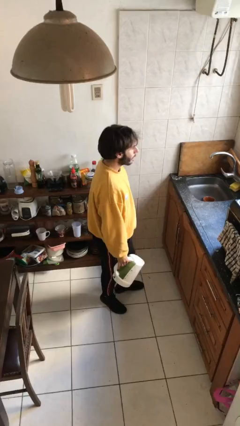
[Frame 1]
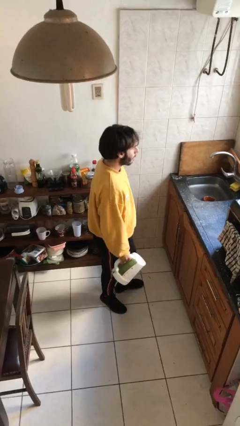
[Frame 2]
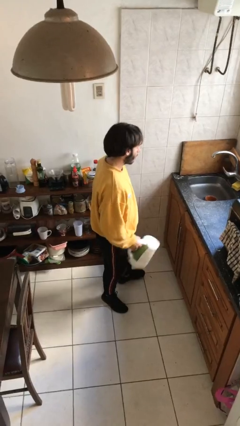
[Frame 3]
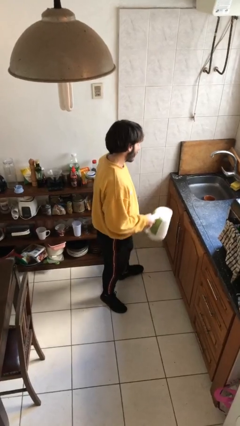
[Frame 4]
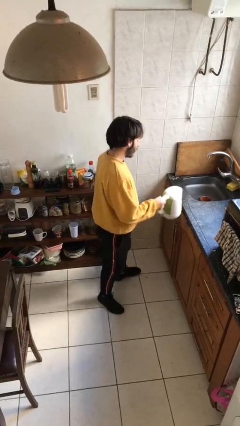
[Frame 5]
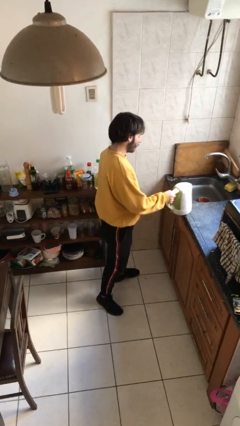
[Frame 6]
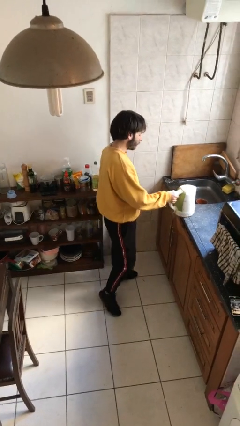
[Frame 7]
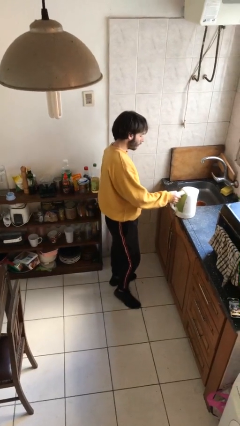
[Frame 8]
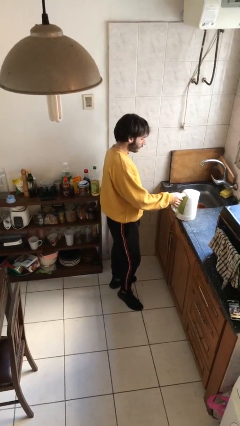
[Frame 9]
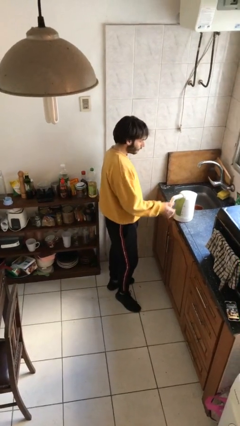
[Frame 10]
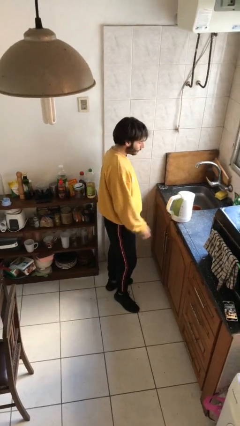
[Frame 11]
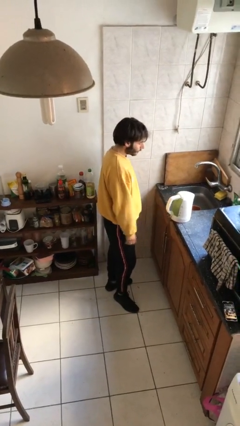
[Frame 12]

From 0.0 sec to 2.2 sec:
person puts down object on countertop

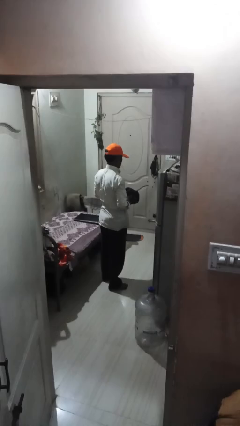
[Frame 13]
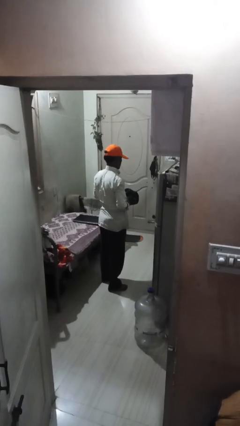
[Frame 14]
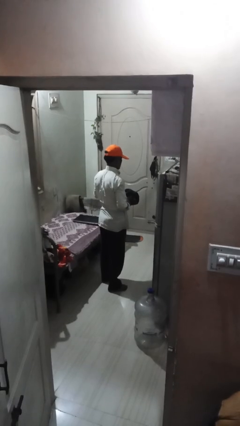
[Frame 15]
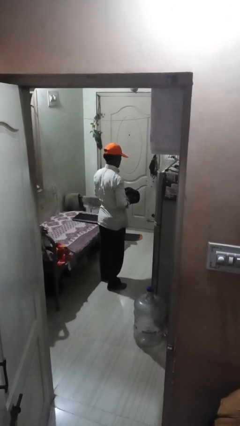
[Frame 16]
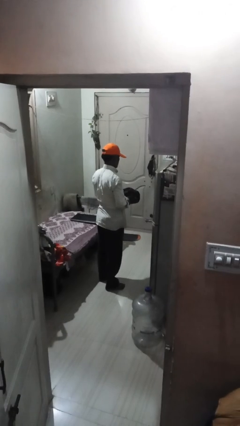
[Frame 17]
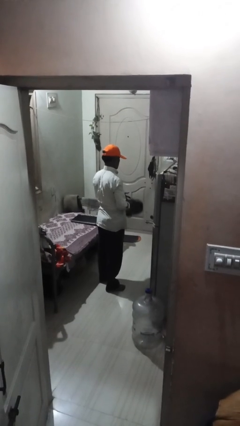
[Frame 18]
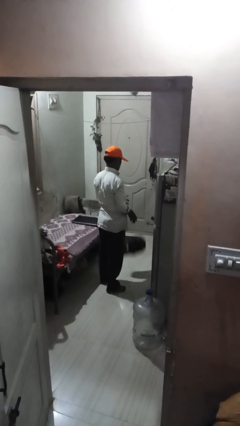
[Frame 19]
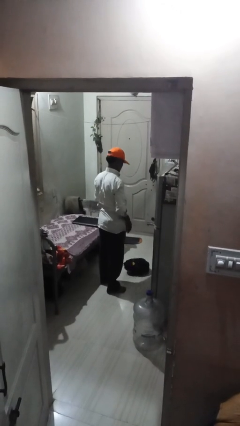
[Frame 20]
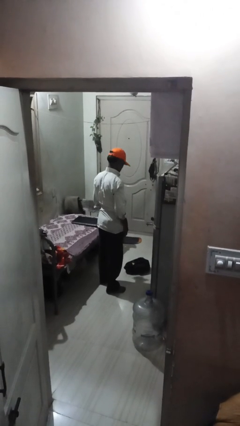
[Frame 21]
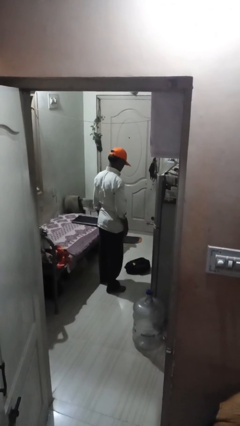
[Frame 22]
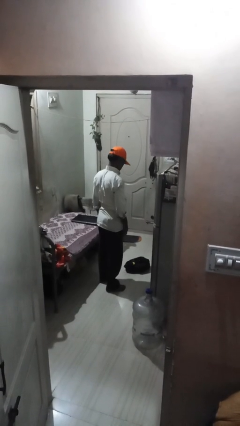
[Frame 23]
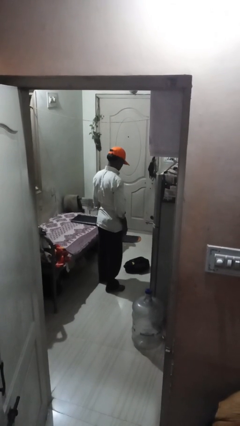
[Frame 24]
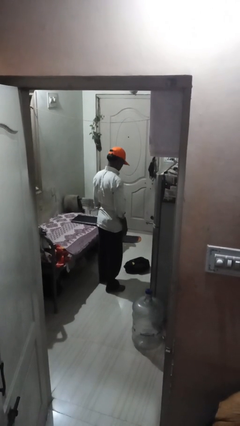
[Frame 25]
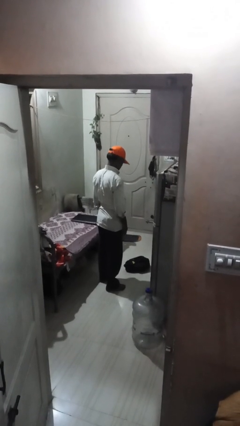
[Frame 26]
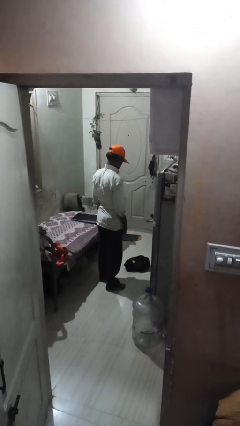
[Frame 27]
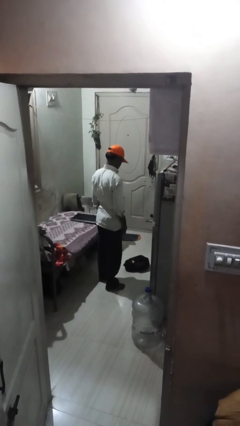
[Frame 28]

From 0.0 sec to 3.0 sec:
person drops object

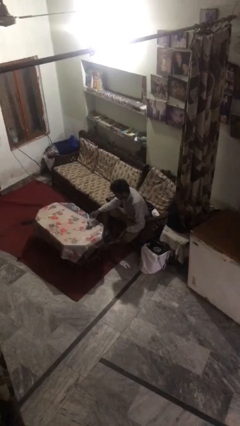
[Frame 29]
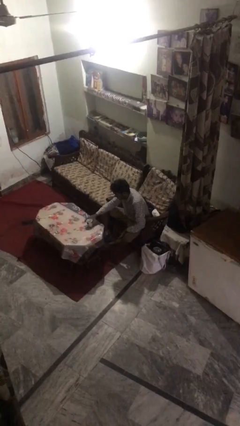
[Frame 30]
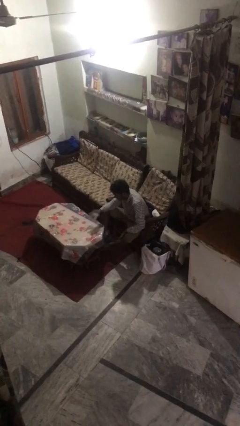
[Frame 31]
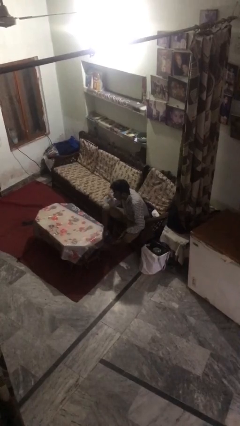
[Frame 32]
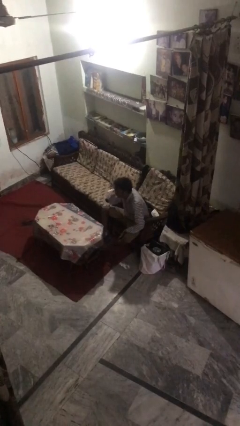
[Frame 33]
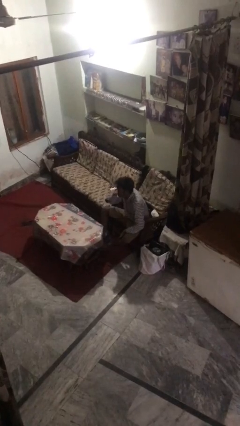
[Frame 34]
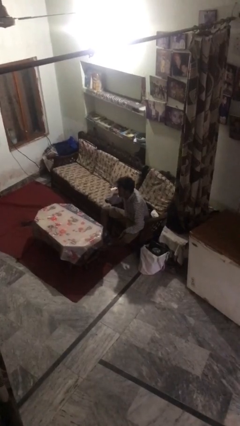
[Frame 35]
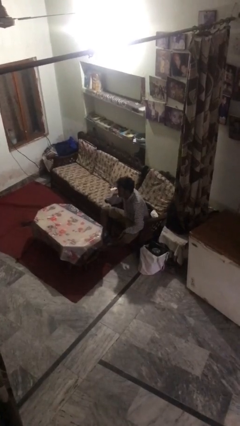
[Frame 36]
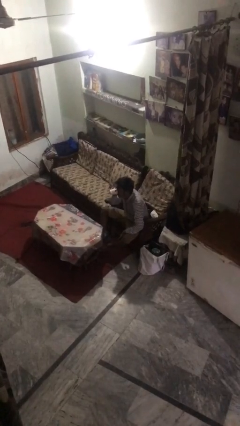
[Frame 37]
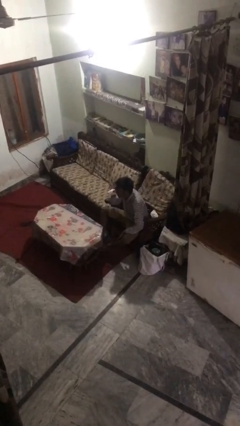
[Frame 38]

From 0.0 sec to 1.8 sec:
person drinks from mug

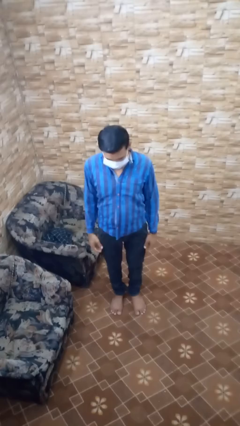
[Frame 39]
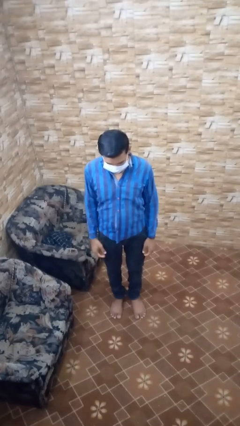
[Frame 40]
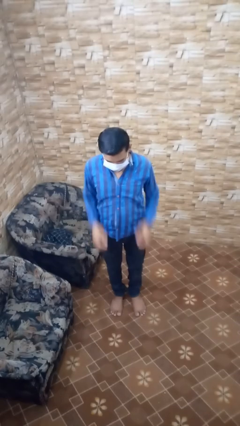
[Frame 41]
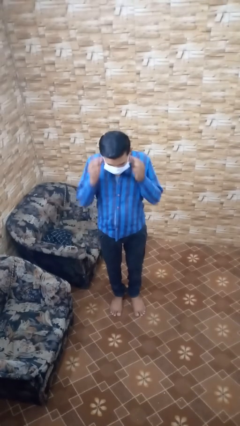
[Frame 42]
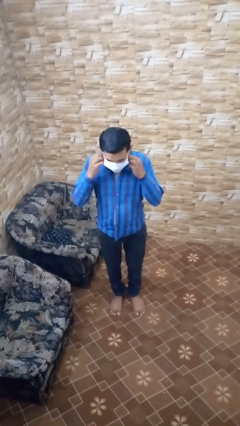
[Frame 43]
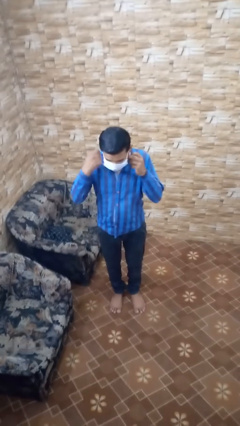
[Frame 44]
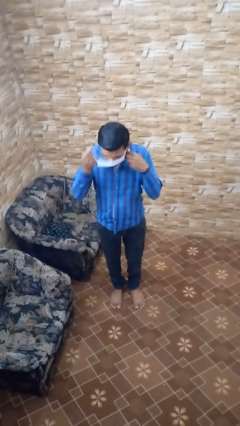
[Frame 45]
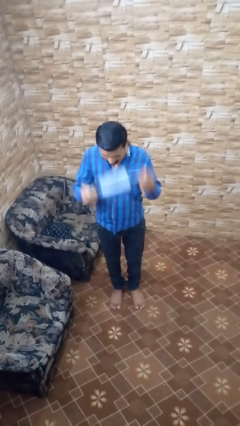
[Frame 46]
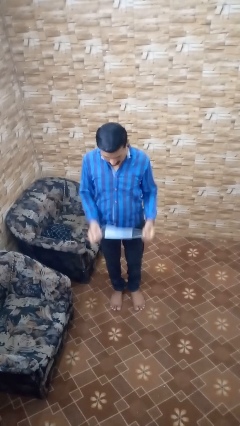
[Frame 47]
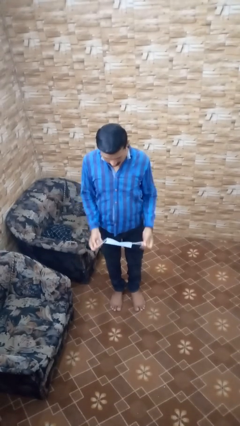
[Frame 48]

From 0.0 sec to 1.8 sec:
person takes off facemask

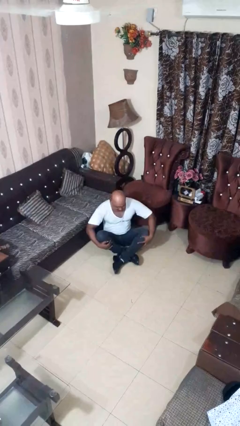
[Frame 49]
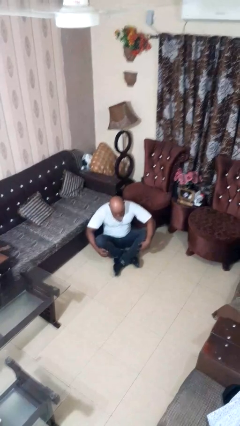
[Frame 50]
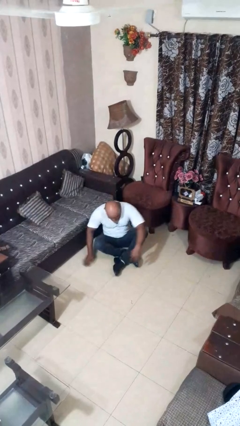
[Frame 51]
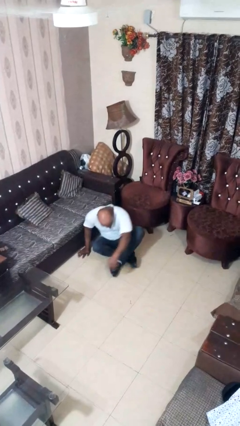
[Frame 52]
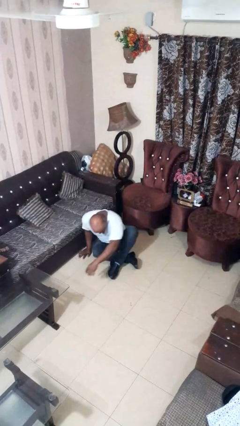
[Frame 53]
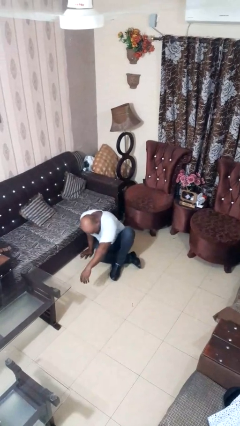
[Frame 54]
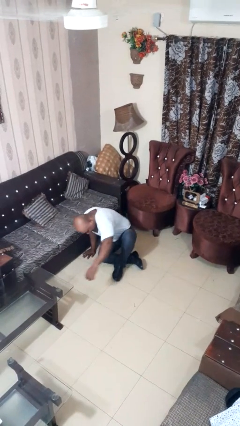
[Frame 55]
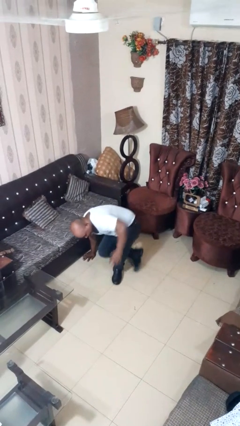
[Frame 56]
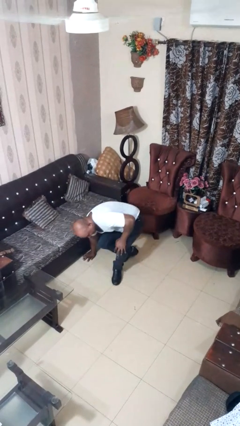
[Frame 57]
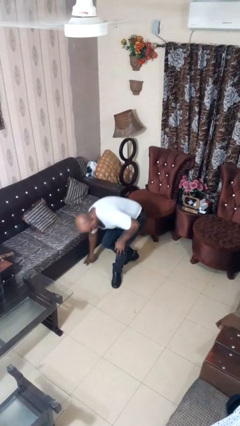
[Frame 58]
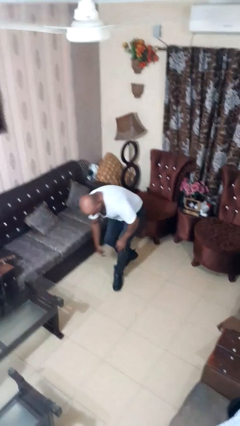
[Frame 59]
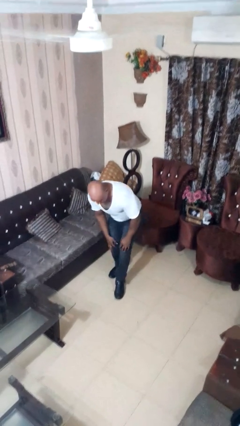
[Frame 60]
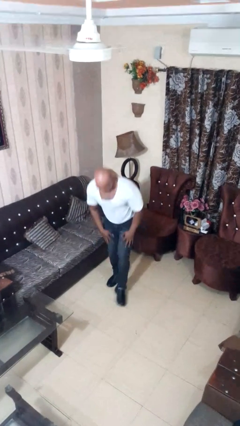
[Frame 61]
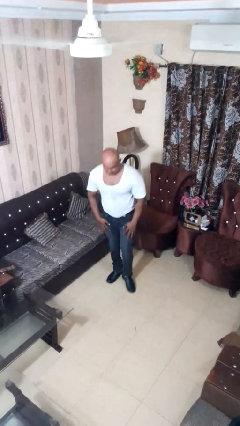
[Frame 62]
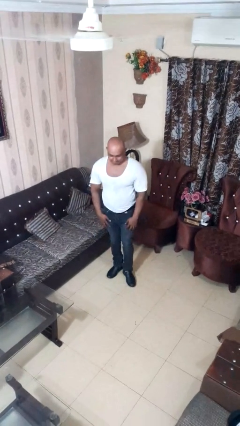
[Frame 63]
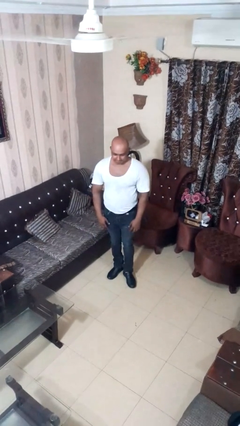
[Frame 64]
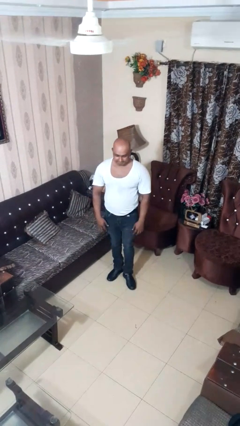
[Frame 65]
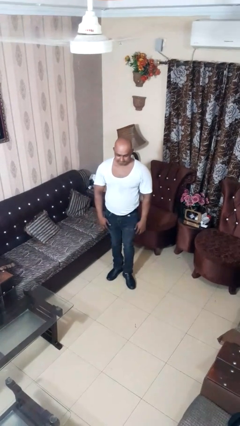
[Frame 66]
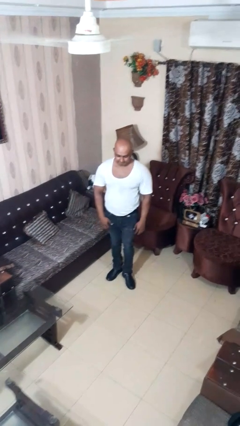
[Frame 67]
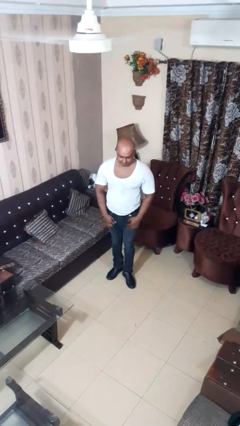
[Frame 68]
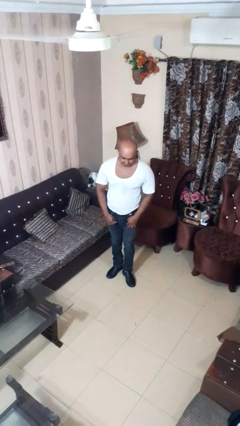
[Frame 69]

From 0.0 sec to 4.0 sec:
person stands up from floor

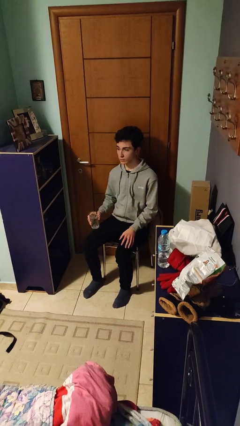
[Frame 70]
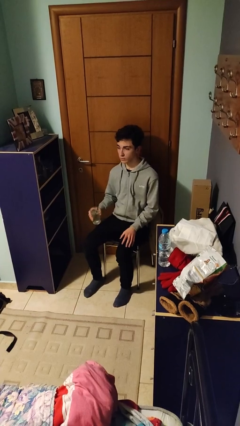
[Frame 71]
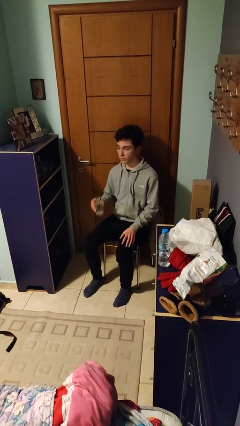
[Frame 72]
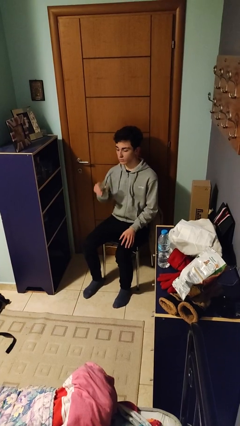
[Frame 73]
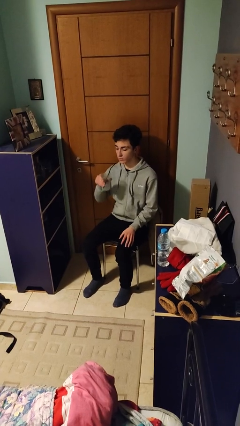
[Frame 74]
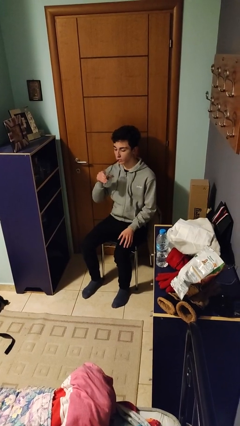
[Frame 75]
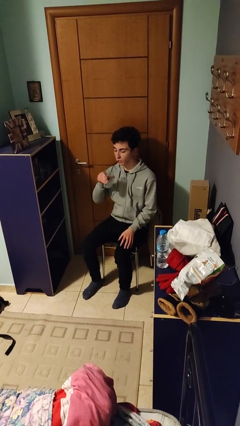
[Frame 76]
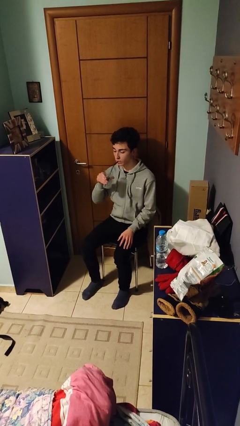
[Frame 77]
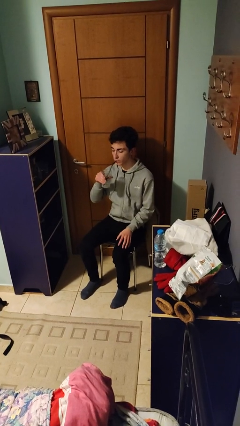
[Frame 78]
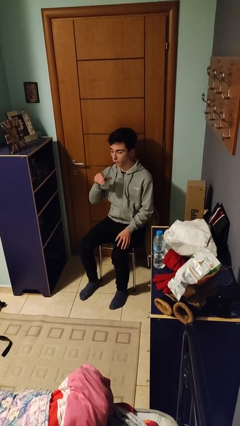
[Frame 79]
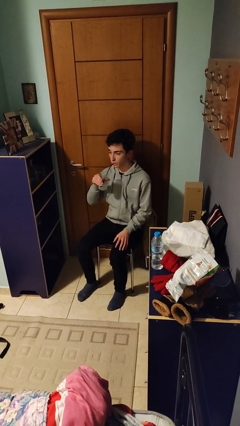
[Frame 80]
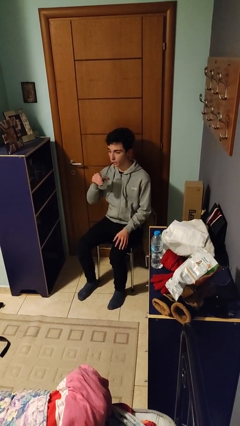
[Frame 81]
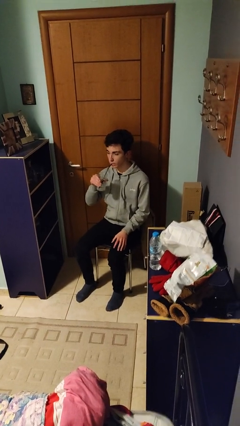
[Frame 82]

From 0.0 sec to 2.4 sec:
person drinks from straw

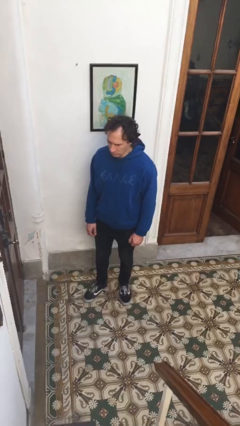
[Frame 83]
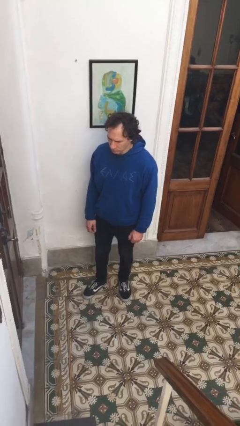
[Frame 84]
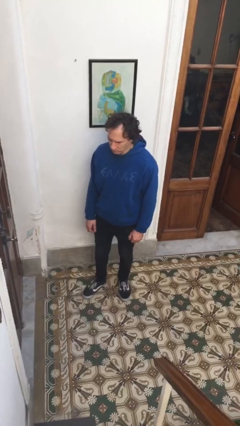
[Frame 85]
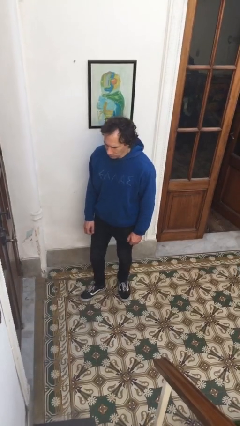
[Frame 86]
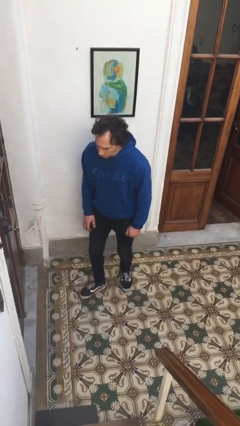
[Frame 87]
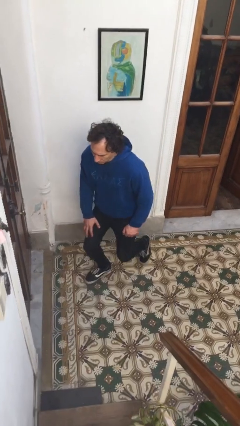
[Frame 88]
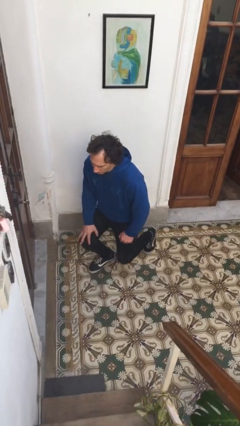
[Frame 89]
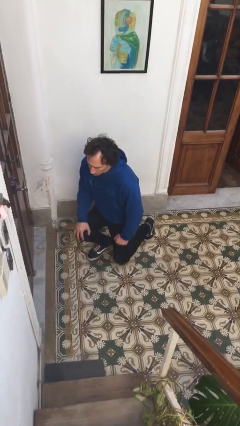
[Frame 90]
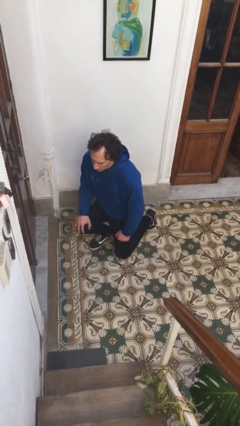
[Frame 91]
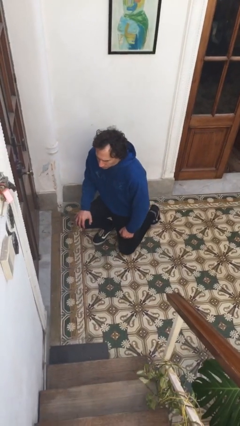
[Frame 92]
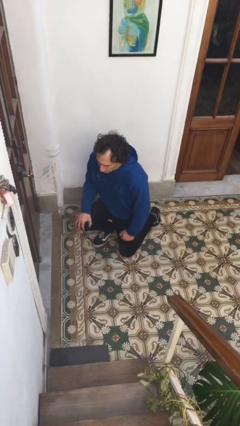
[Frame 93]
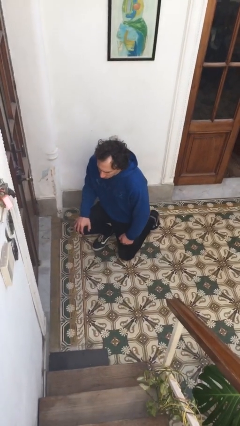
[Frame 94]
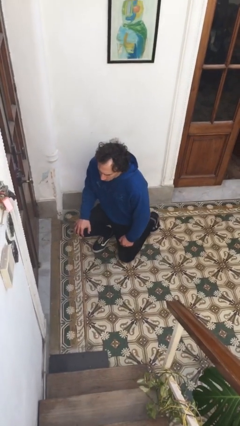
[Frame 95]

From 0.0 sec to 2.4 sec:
person kneels
